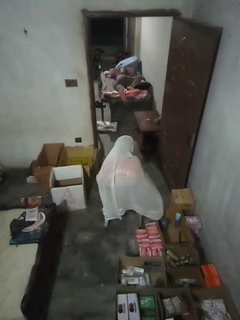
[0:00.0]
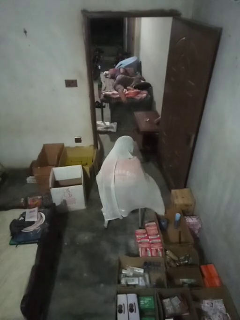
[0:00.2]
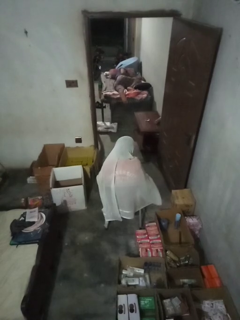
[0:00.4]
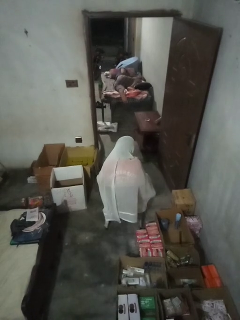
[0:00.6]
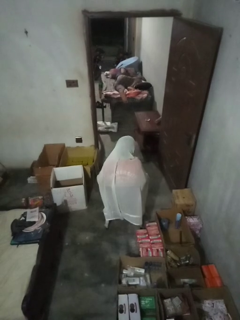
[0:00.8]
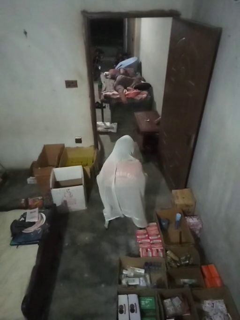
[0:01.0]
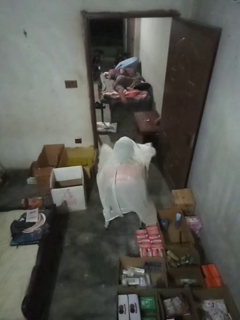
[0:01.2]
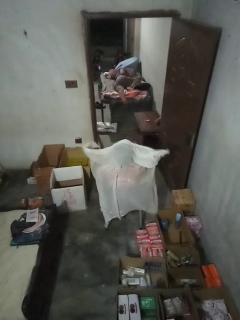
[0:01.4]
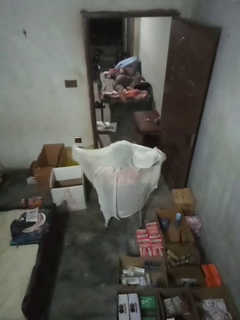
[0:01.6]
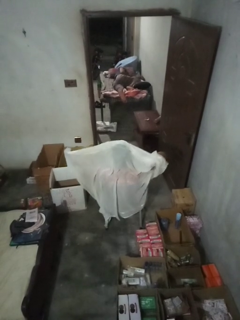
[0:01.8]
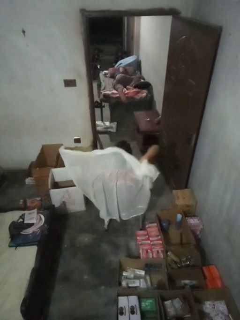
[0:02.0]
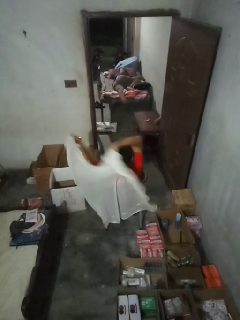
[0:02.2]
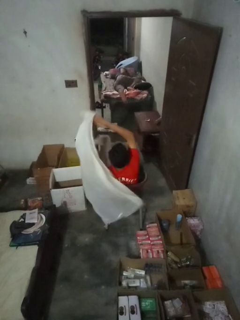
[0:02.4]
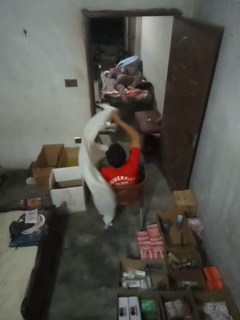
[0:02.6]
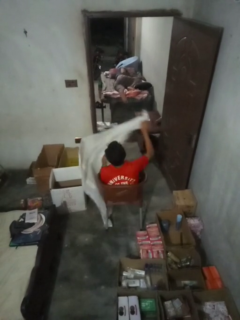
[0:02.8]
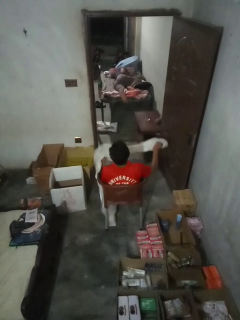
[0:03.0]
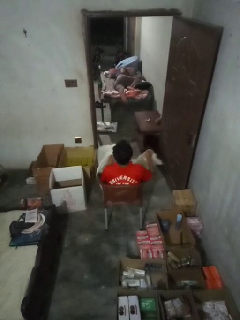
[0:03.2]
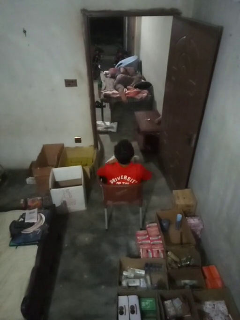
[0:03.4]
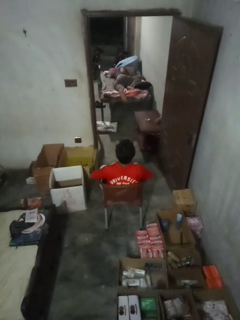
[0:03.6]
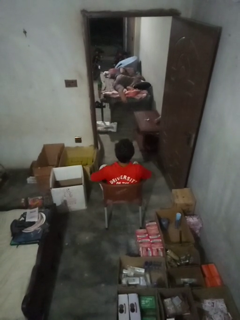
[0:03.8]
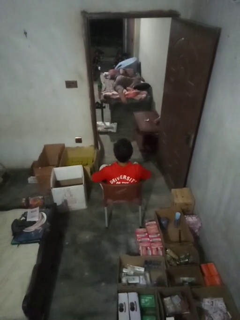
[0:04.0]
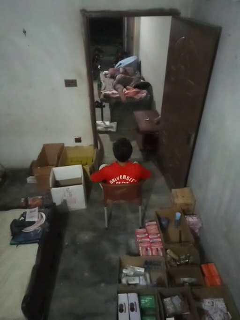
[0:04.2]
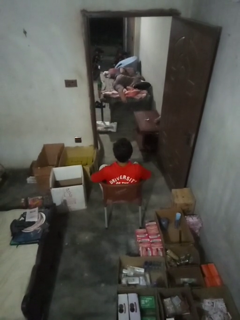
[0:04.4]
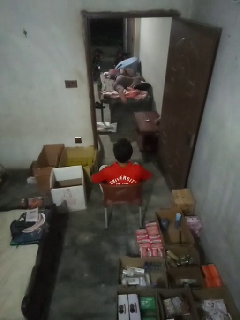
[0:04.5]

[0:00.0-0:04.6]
person uncovers with blanket

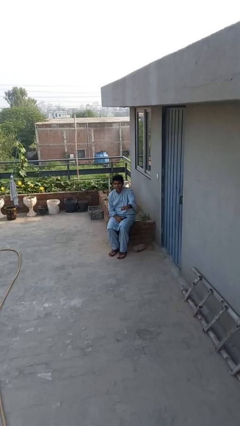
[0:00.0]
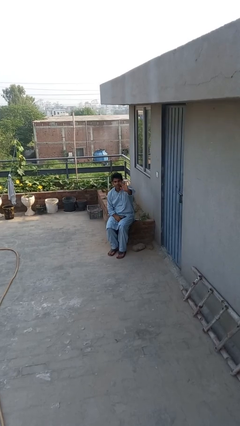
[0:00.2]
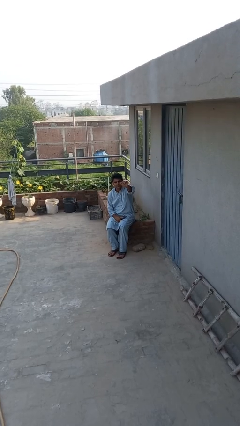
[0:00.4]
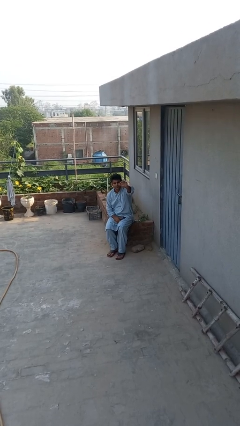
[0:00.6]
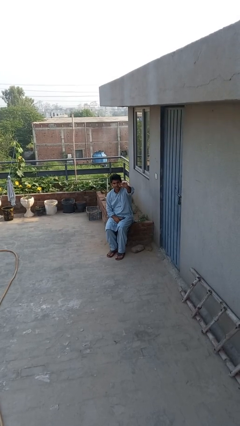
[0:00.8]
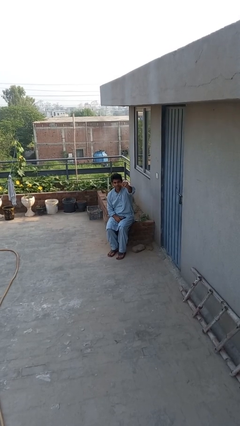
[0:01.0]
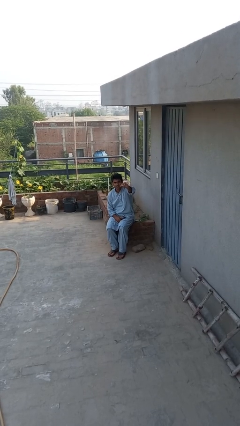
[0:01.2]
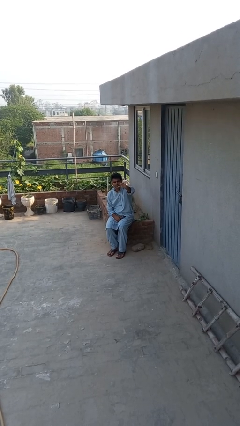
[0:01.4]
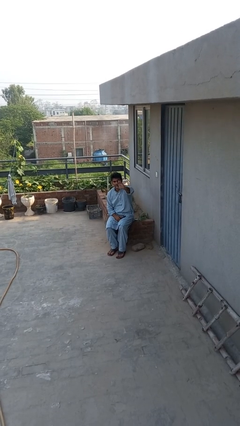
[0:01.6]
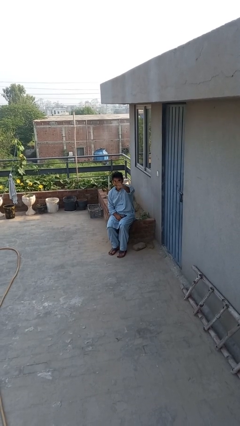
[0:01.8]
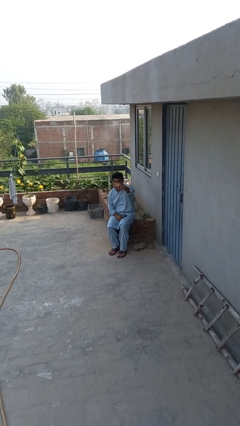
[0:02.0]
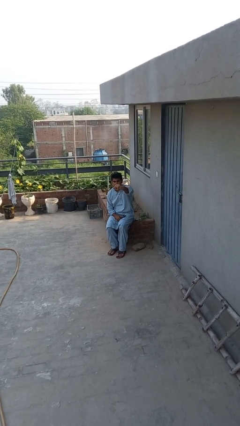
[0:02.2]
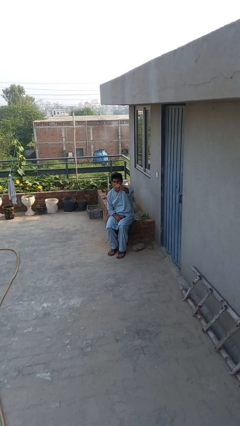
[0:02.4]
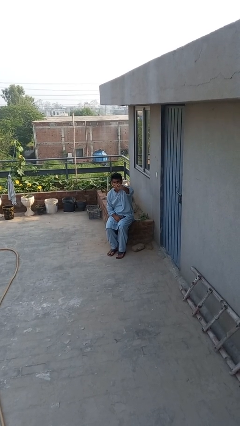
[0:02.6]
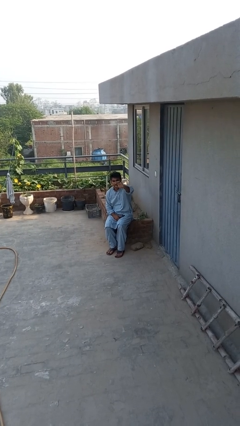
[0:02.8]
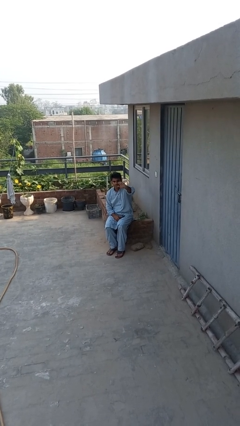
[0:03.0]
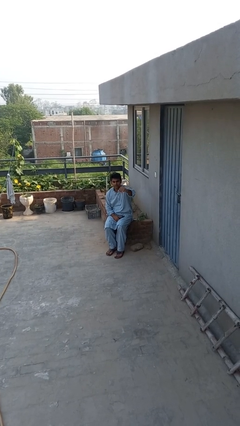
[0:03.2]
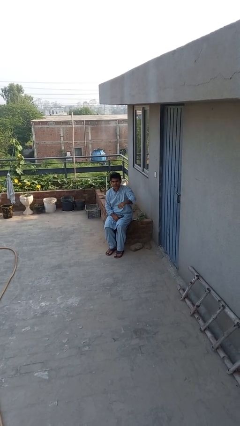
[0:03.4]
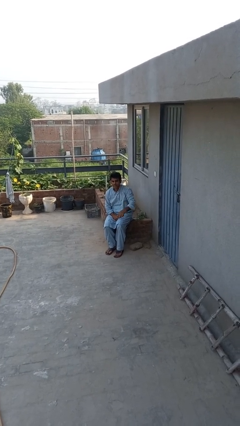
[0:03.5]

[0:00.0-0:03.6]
person gestures come here

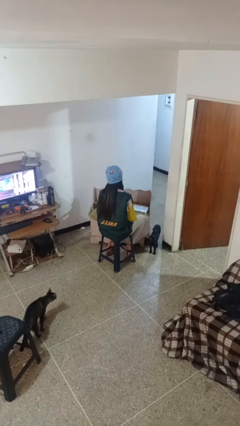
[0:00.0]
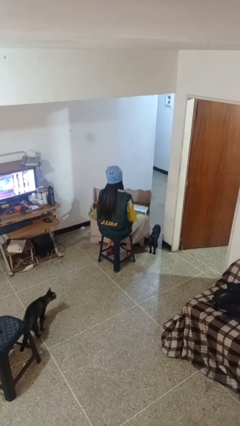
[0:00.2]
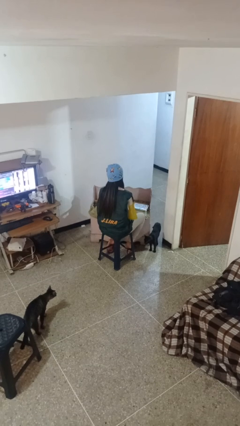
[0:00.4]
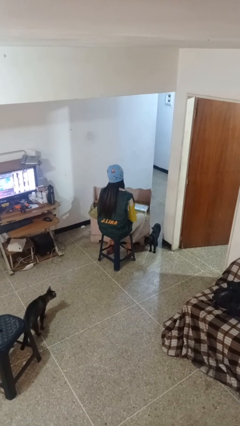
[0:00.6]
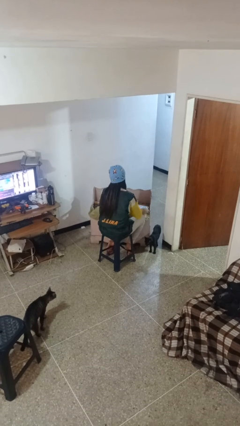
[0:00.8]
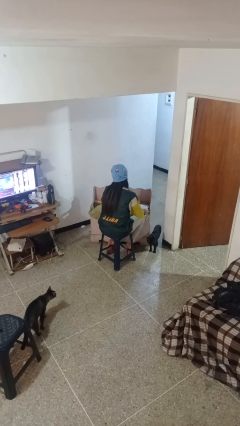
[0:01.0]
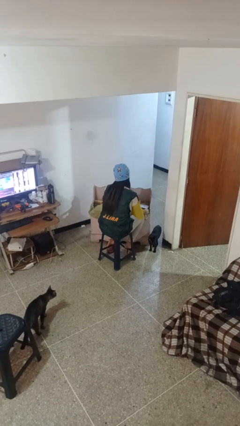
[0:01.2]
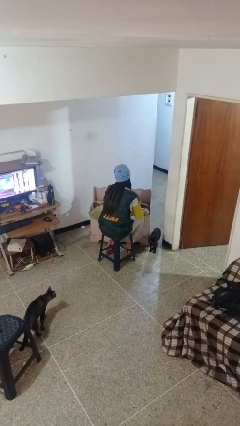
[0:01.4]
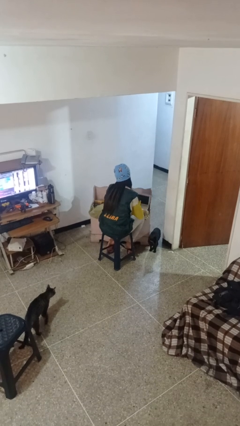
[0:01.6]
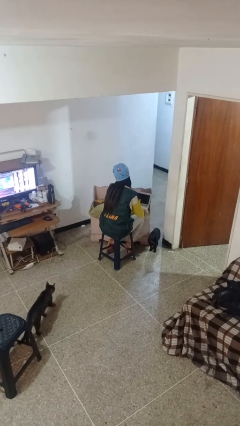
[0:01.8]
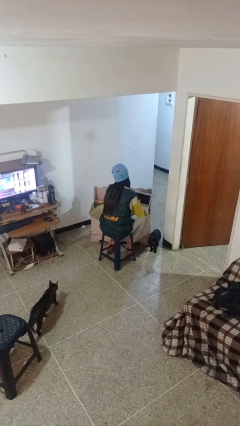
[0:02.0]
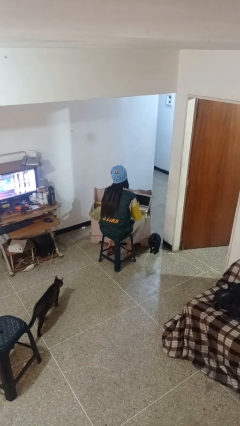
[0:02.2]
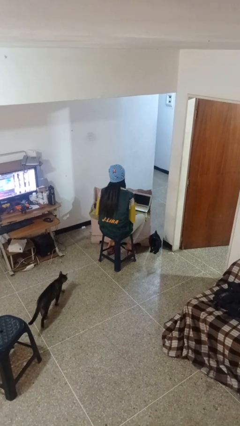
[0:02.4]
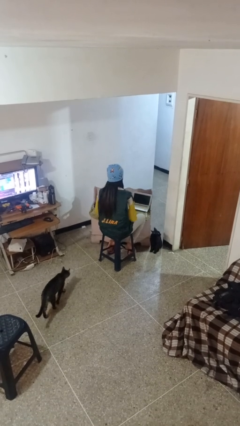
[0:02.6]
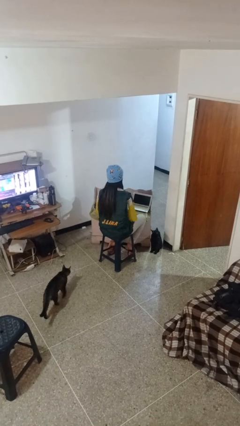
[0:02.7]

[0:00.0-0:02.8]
person opens laptop

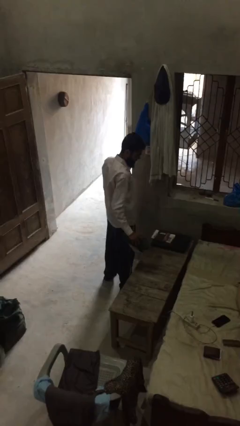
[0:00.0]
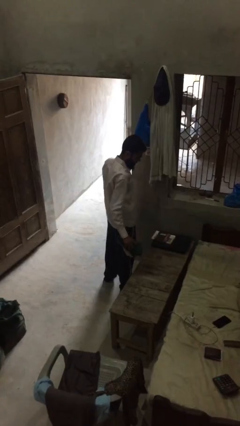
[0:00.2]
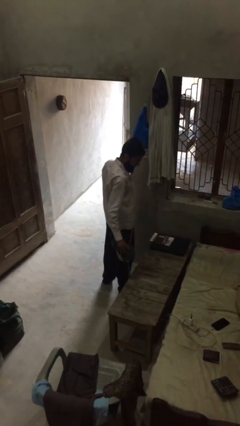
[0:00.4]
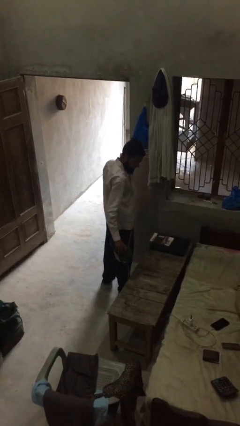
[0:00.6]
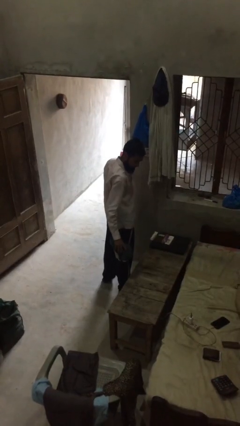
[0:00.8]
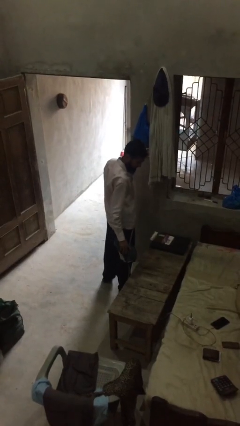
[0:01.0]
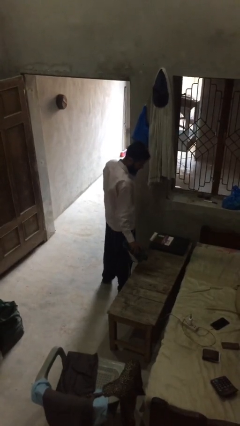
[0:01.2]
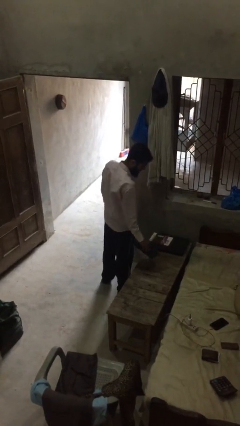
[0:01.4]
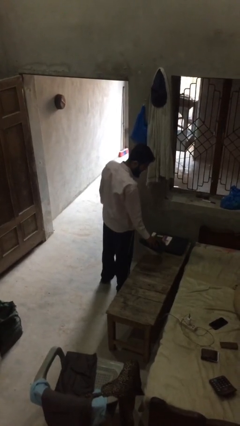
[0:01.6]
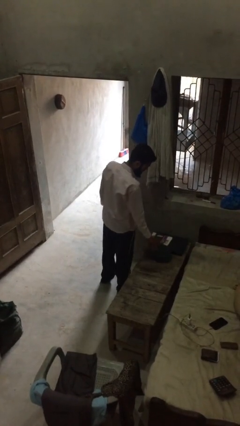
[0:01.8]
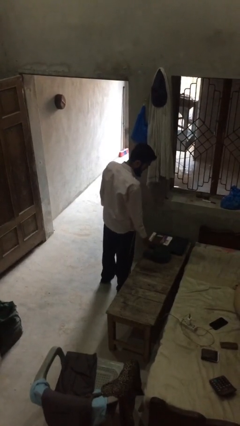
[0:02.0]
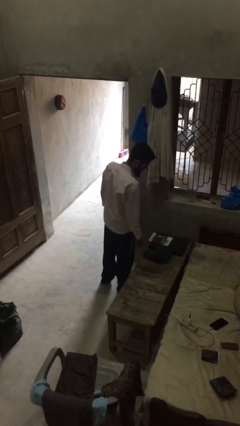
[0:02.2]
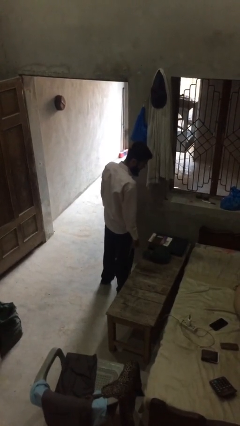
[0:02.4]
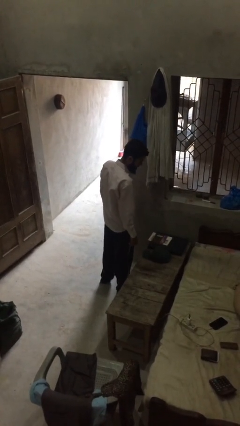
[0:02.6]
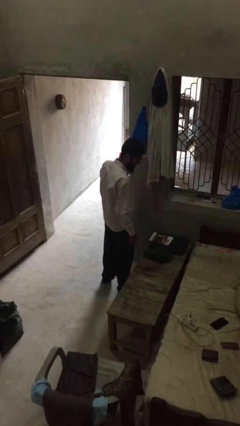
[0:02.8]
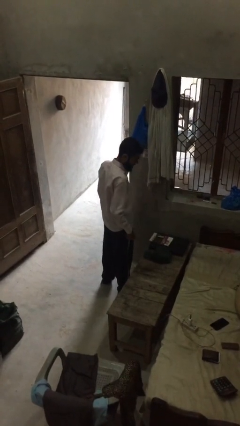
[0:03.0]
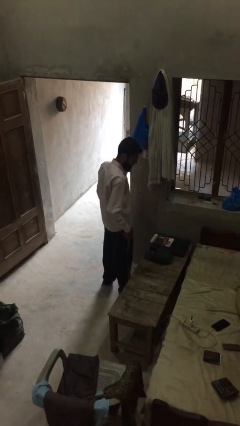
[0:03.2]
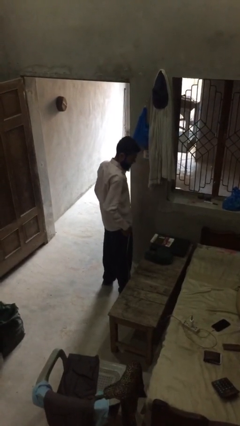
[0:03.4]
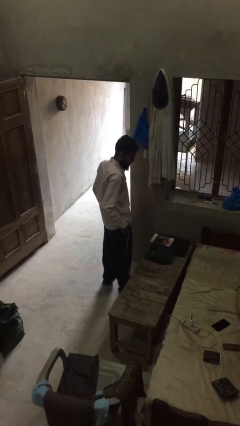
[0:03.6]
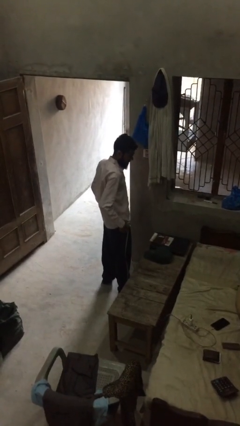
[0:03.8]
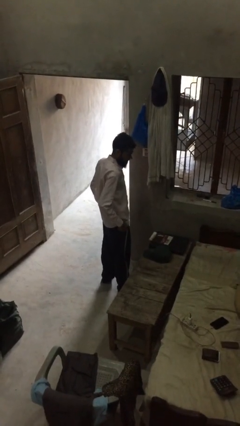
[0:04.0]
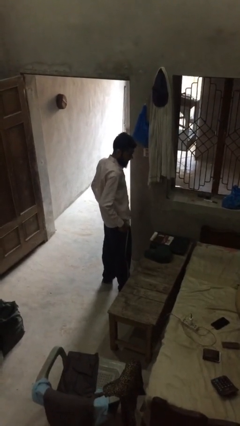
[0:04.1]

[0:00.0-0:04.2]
person puts down object on table

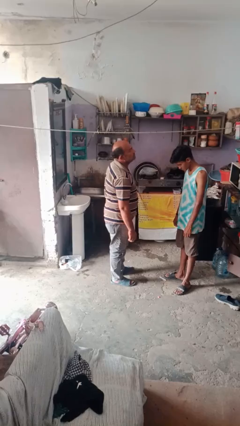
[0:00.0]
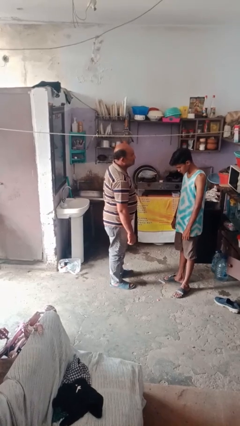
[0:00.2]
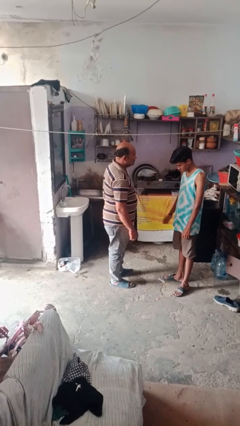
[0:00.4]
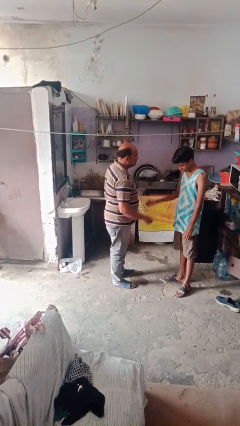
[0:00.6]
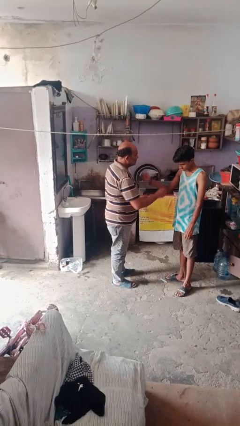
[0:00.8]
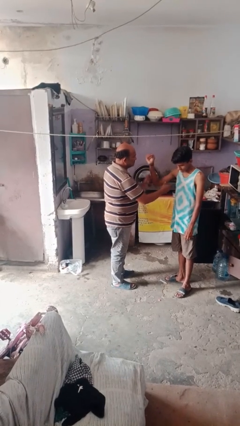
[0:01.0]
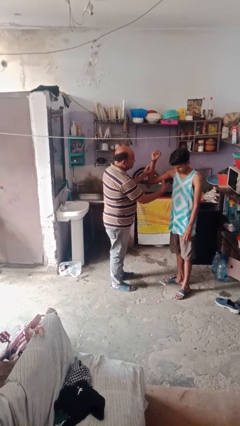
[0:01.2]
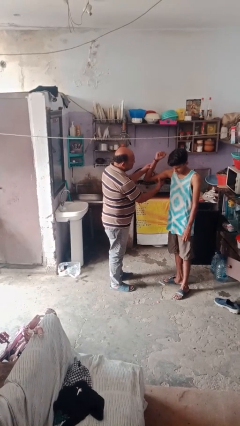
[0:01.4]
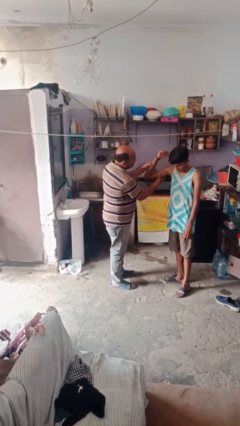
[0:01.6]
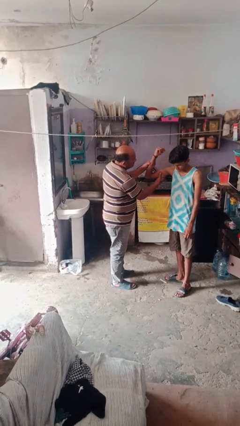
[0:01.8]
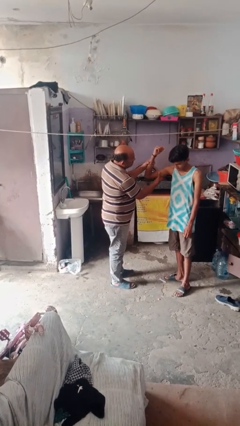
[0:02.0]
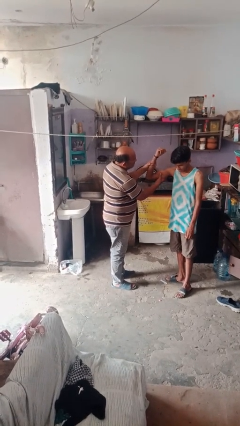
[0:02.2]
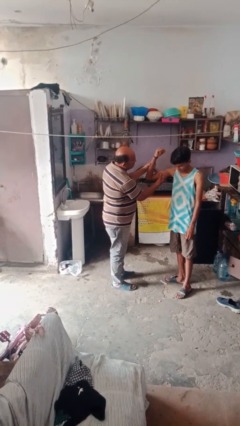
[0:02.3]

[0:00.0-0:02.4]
person grabs person by bicep

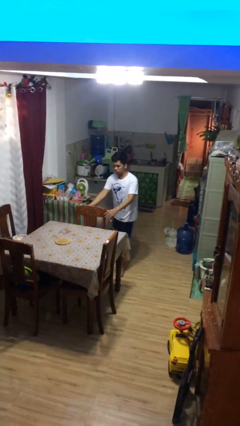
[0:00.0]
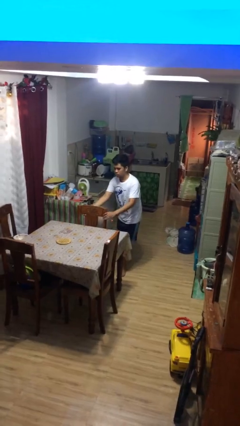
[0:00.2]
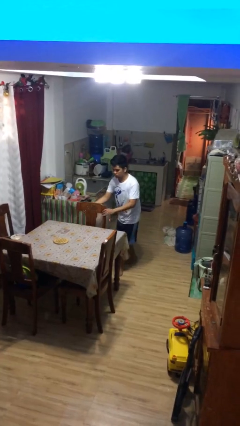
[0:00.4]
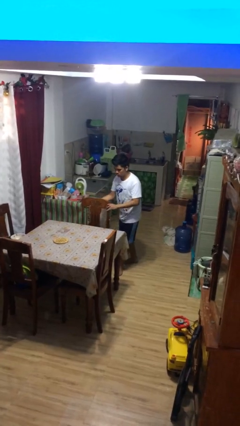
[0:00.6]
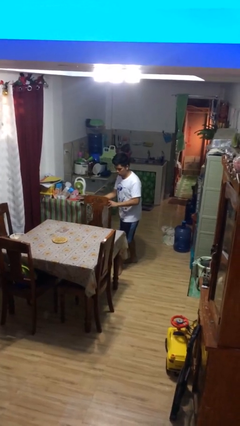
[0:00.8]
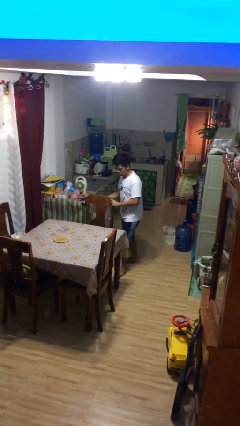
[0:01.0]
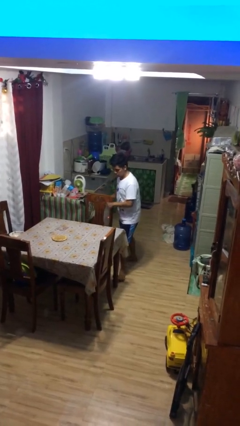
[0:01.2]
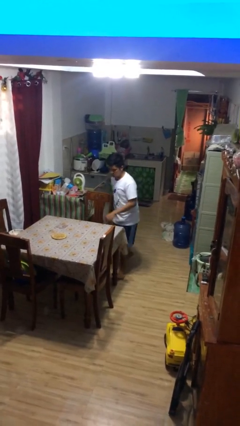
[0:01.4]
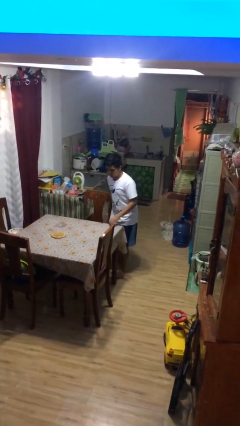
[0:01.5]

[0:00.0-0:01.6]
person stands up
